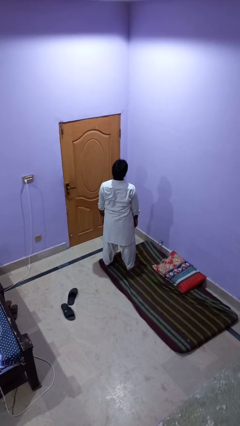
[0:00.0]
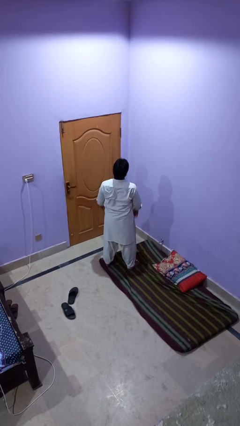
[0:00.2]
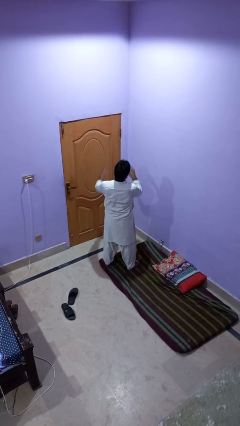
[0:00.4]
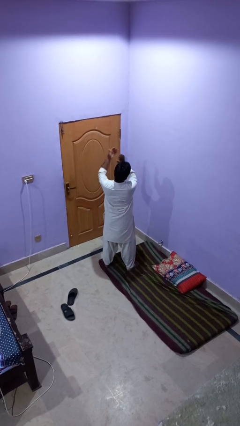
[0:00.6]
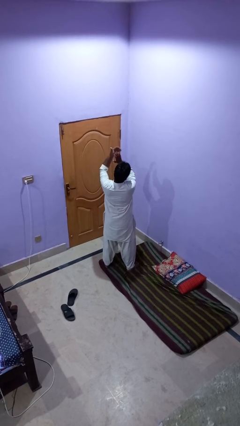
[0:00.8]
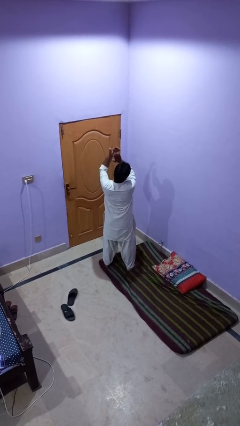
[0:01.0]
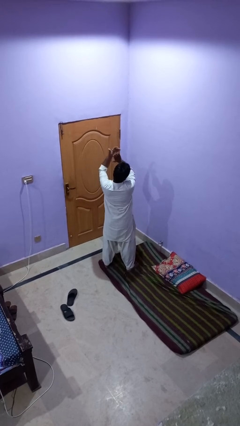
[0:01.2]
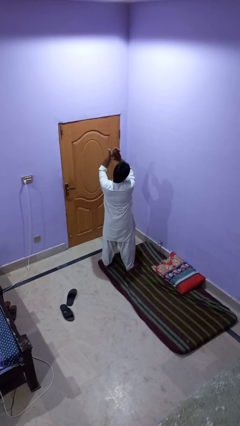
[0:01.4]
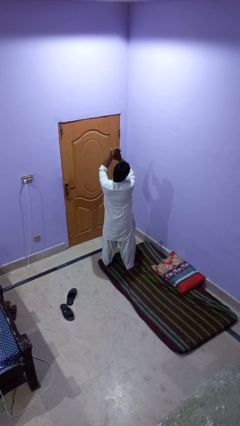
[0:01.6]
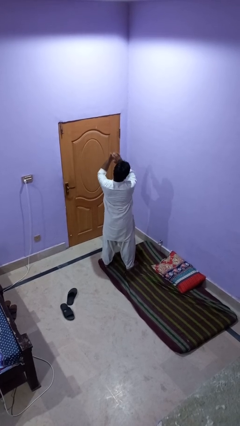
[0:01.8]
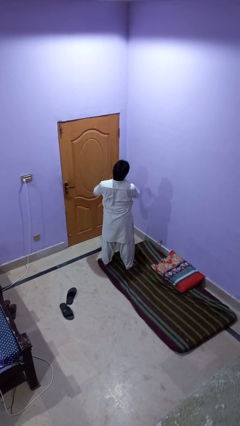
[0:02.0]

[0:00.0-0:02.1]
person claps hands

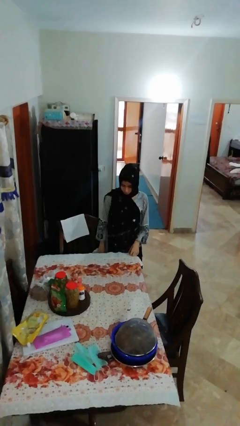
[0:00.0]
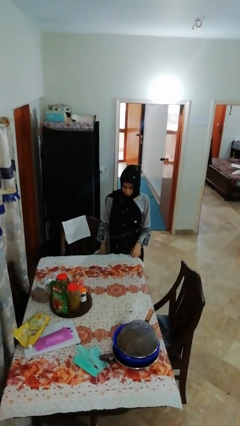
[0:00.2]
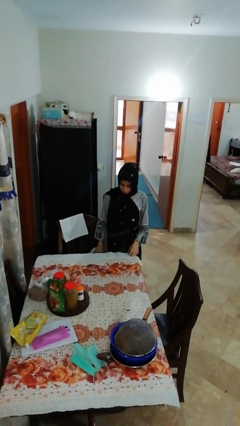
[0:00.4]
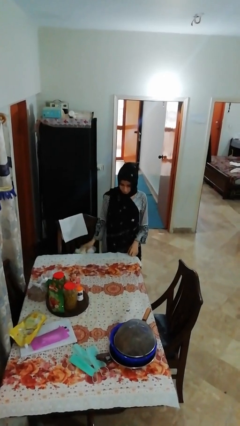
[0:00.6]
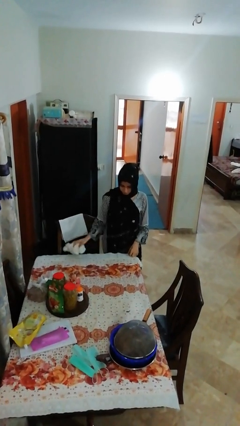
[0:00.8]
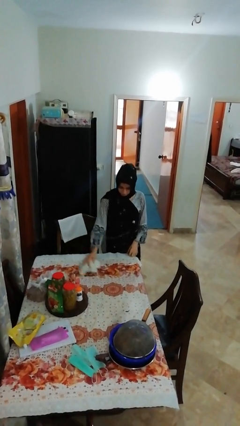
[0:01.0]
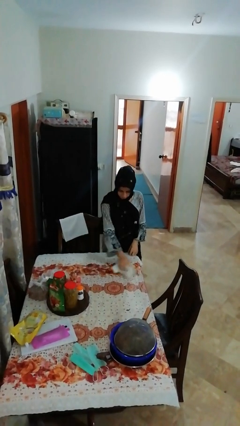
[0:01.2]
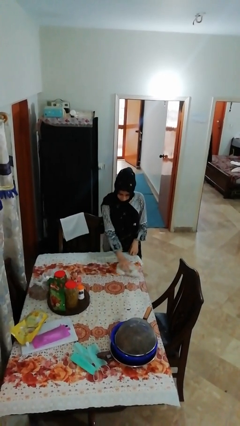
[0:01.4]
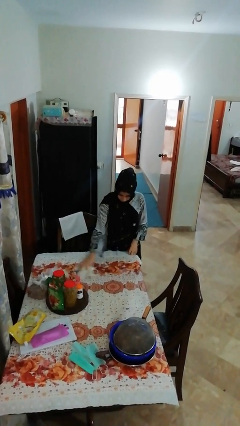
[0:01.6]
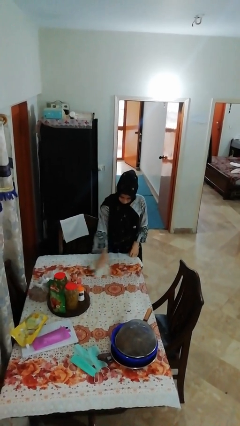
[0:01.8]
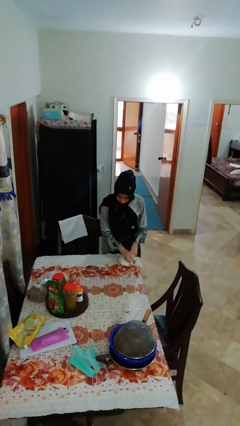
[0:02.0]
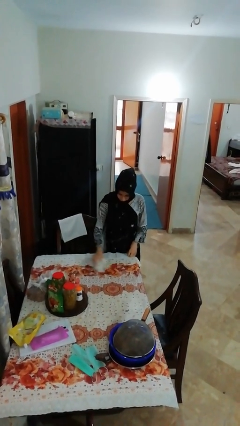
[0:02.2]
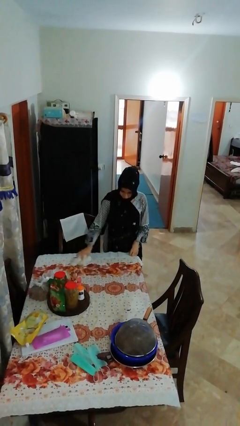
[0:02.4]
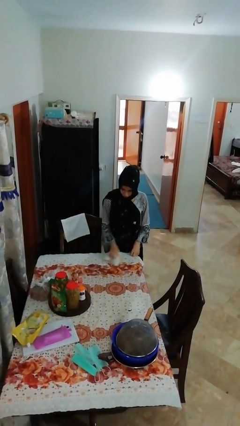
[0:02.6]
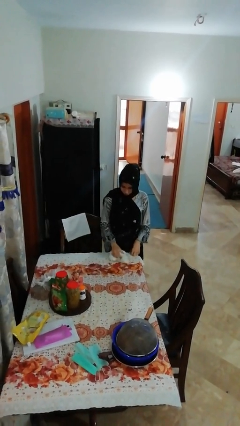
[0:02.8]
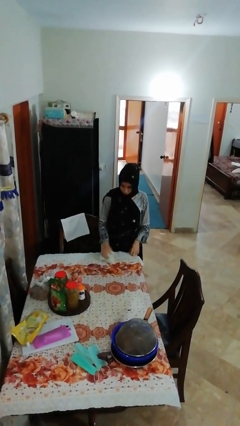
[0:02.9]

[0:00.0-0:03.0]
person cleans table with rag

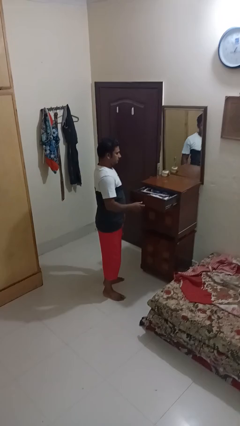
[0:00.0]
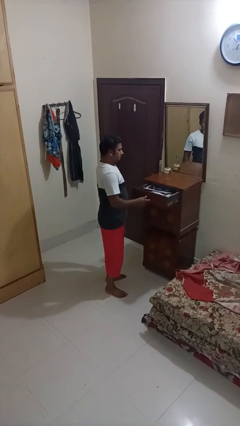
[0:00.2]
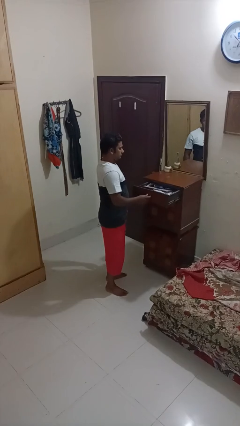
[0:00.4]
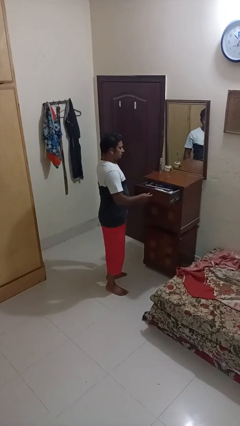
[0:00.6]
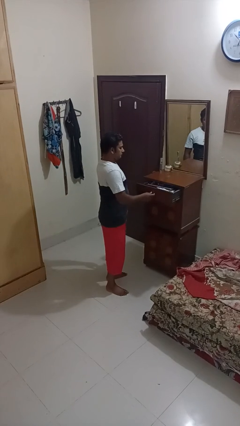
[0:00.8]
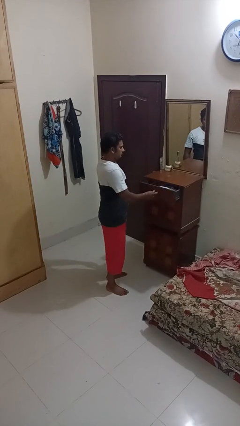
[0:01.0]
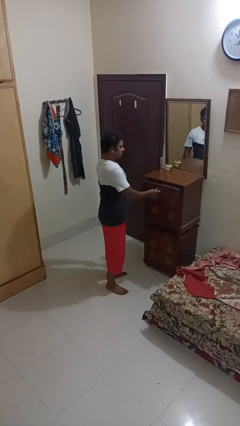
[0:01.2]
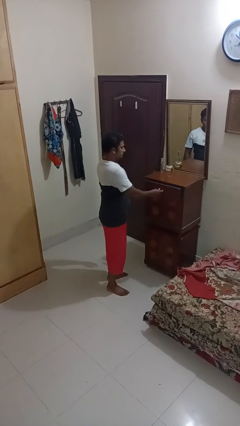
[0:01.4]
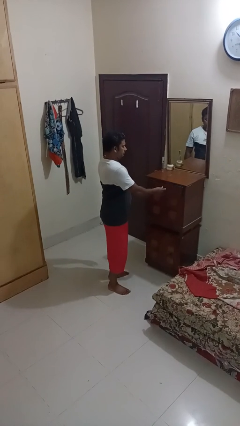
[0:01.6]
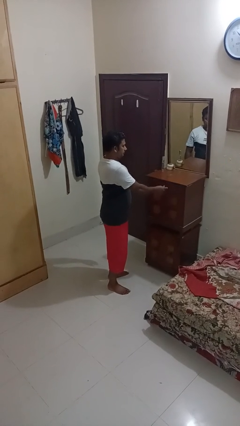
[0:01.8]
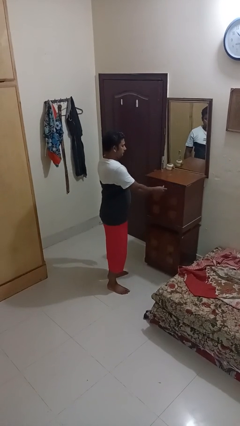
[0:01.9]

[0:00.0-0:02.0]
person closes dresser drawer

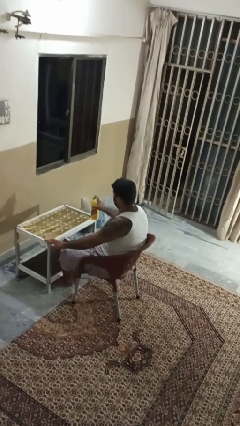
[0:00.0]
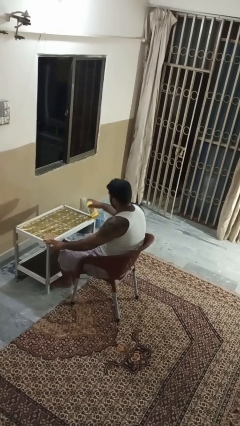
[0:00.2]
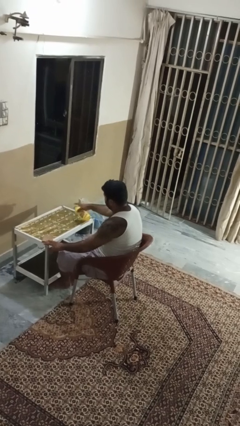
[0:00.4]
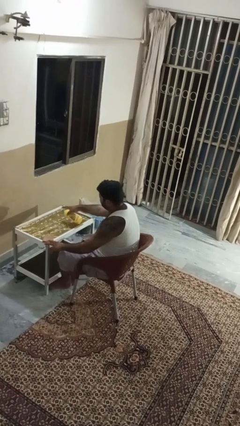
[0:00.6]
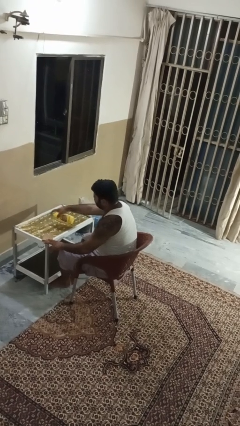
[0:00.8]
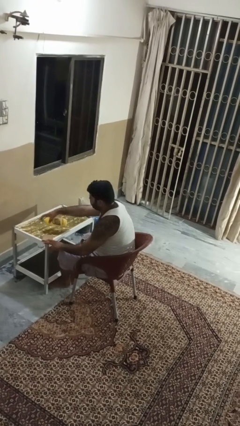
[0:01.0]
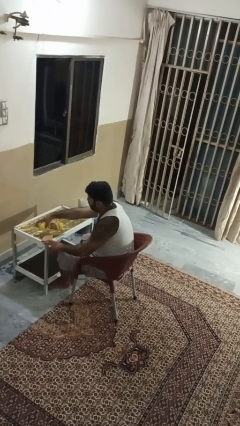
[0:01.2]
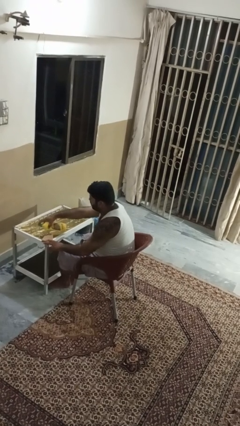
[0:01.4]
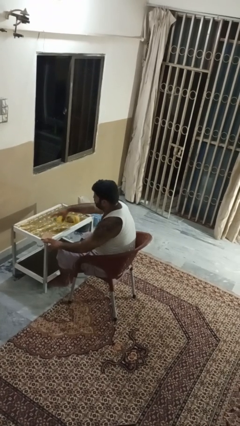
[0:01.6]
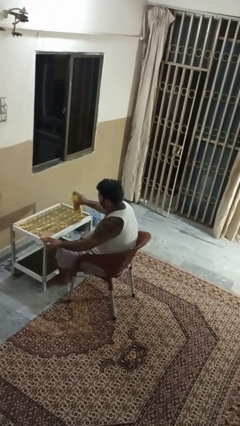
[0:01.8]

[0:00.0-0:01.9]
person sprays from bottle

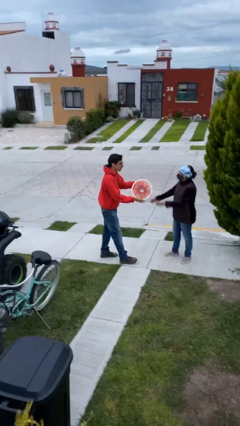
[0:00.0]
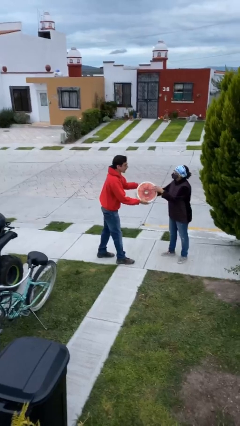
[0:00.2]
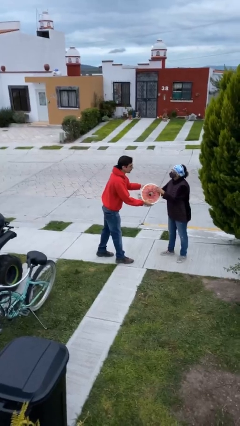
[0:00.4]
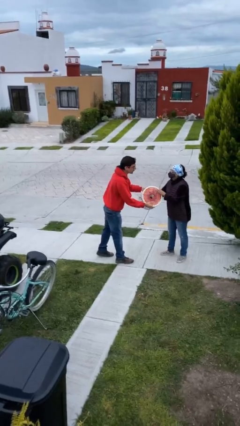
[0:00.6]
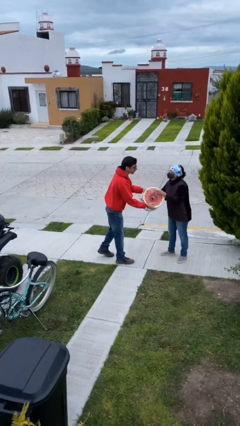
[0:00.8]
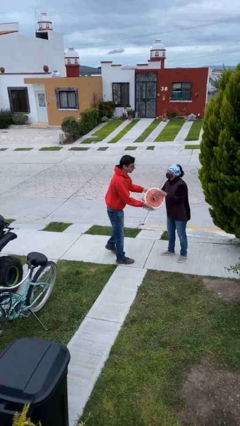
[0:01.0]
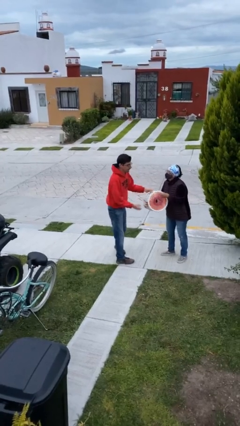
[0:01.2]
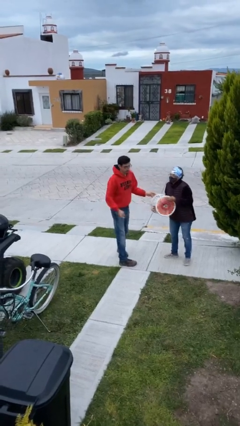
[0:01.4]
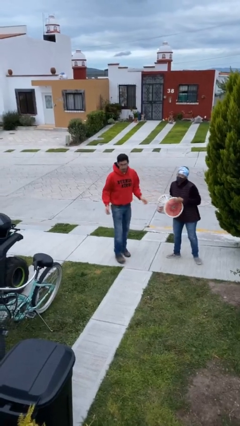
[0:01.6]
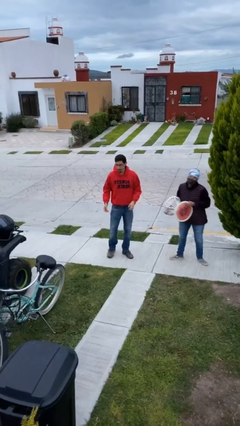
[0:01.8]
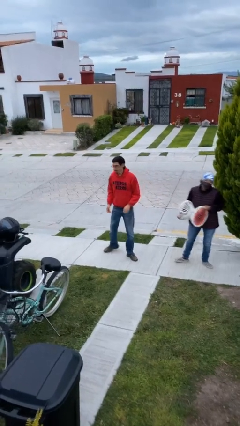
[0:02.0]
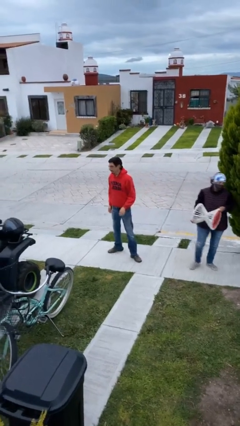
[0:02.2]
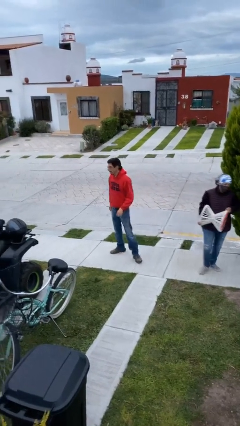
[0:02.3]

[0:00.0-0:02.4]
person transfers object to person

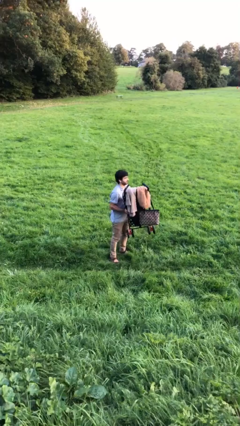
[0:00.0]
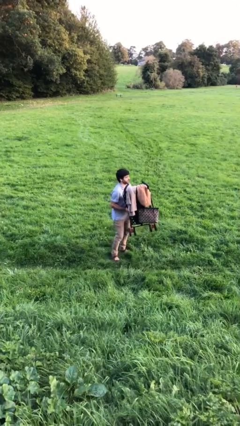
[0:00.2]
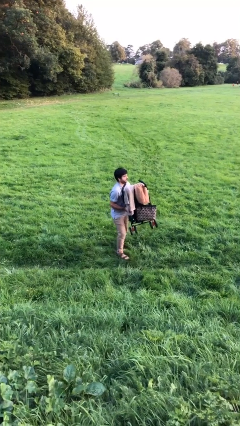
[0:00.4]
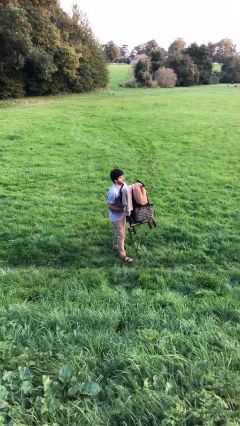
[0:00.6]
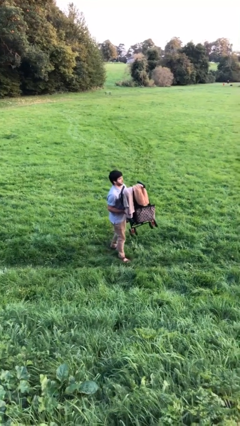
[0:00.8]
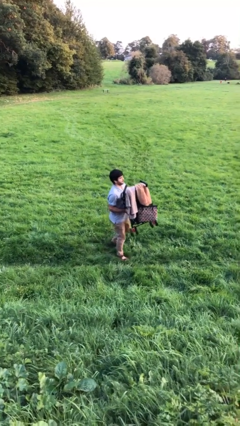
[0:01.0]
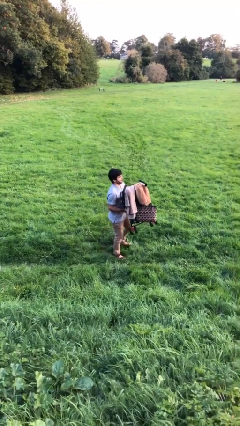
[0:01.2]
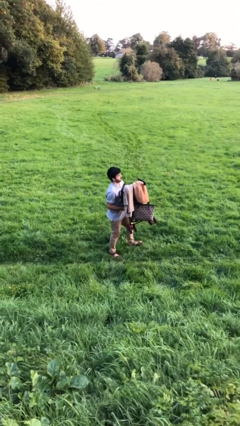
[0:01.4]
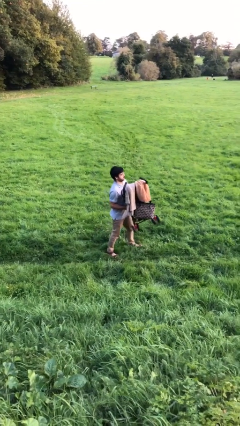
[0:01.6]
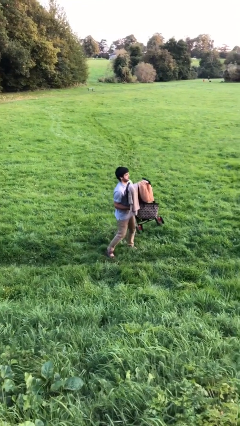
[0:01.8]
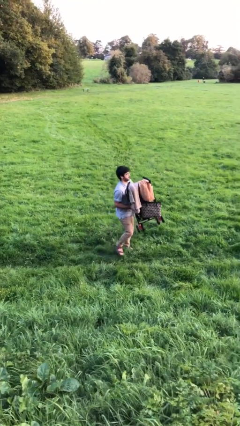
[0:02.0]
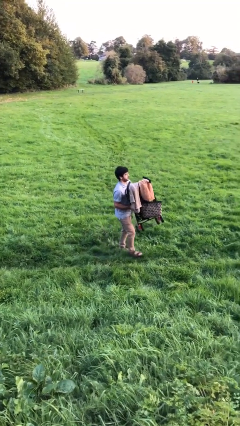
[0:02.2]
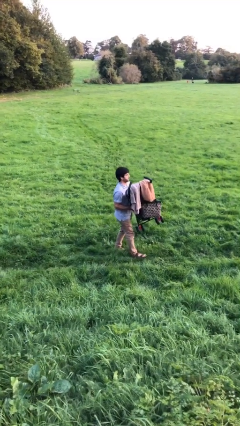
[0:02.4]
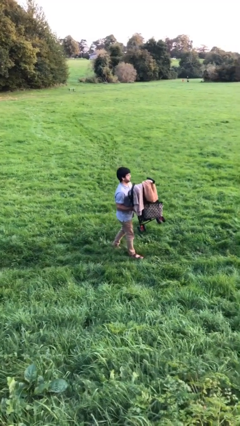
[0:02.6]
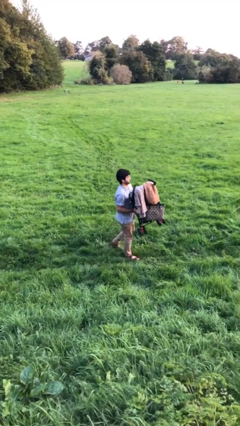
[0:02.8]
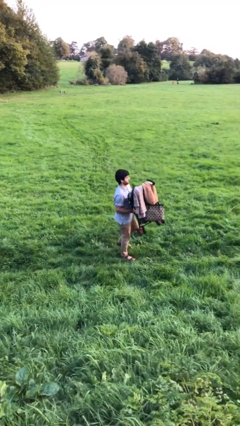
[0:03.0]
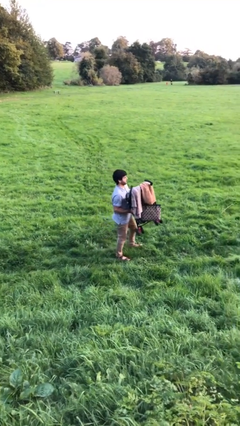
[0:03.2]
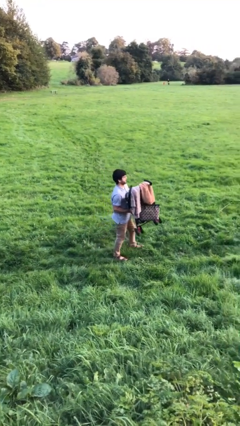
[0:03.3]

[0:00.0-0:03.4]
person carries heavy object

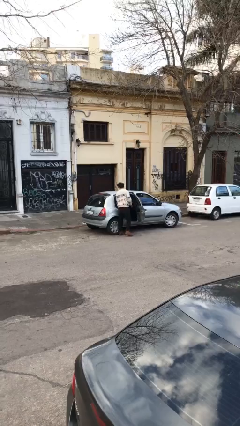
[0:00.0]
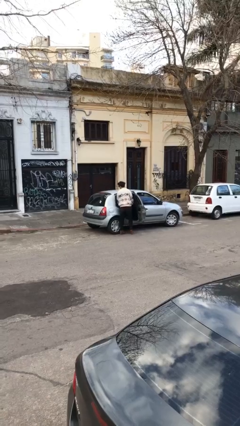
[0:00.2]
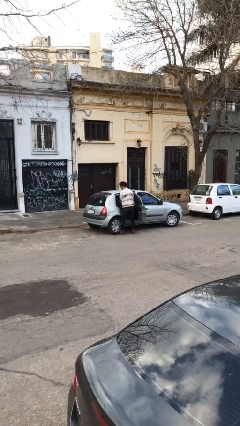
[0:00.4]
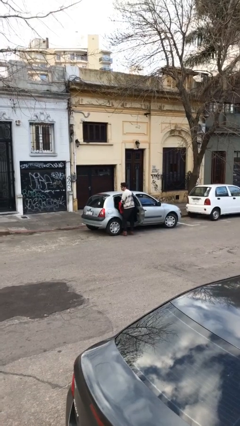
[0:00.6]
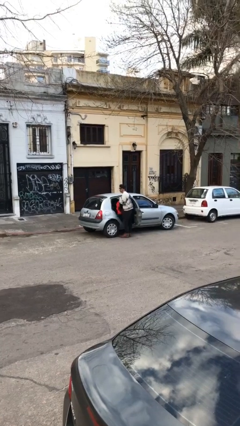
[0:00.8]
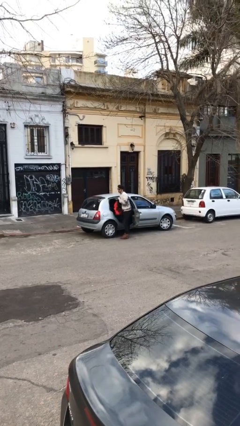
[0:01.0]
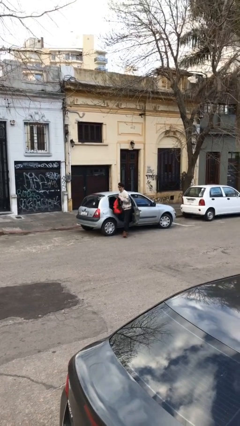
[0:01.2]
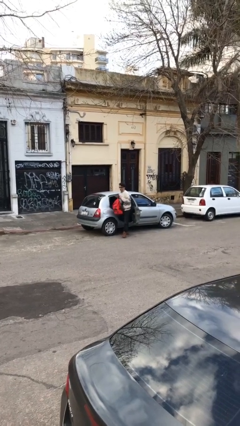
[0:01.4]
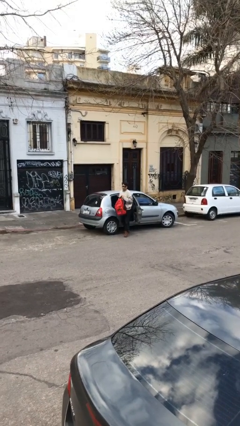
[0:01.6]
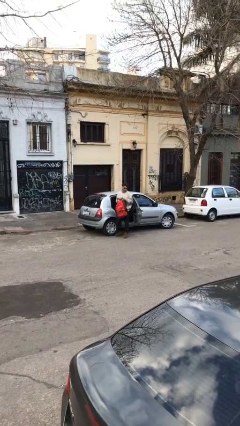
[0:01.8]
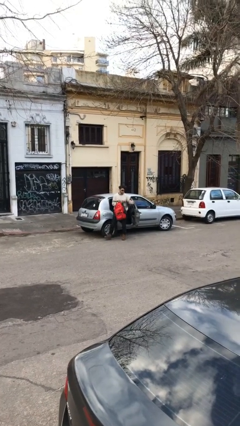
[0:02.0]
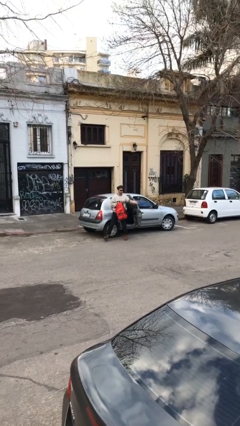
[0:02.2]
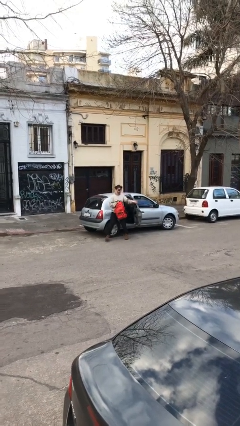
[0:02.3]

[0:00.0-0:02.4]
person unloads car

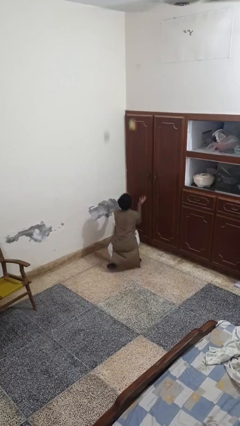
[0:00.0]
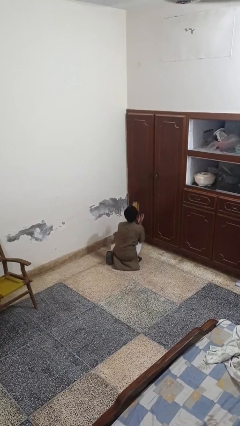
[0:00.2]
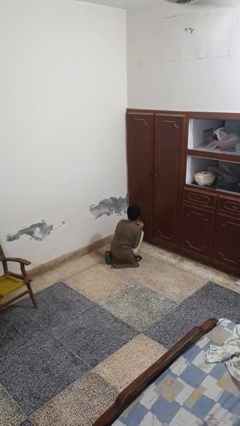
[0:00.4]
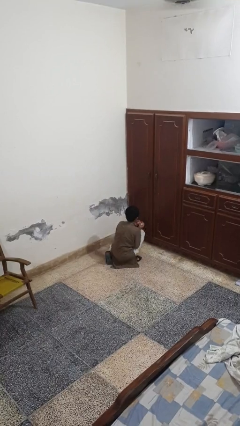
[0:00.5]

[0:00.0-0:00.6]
person catches dropped object
